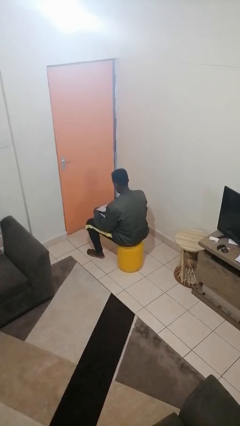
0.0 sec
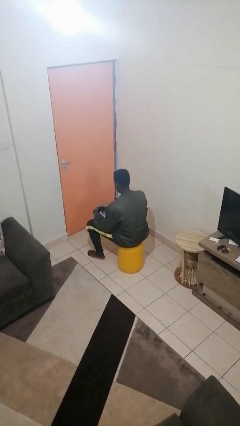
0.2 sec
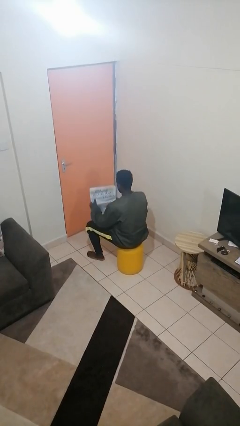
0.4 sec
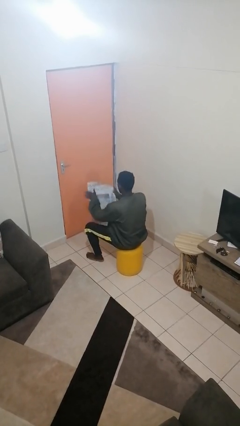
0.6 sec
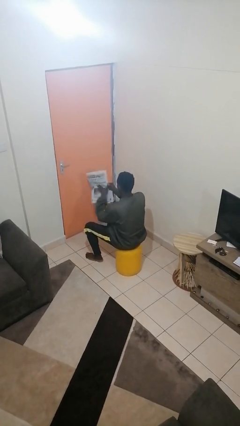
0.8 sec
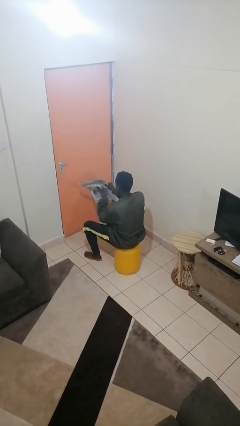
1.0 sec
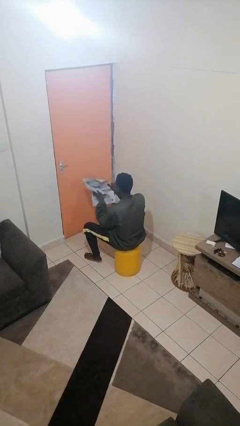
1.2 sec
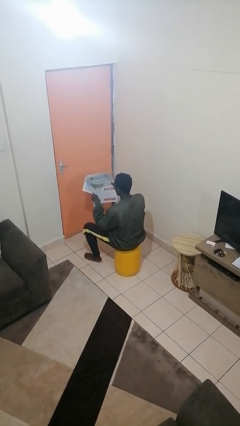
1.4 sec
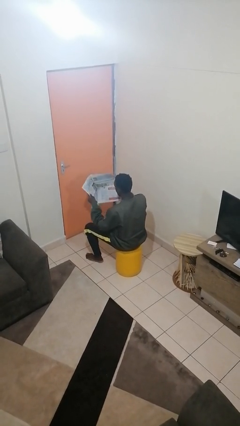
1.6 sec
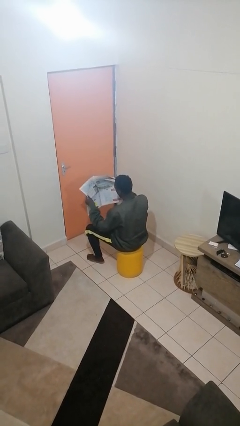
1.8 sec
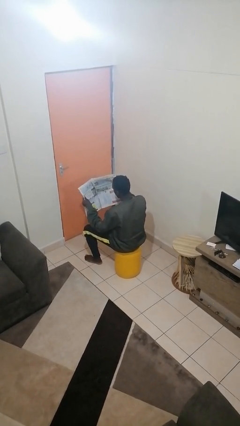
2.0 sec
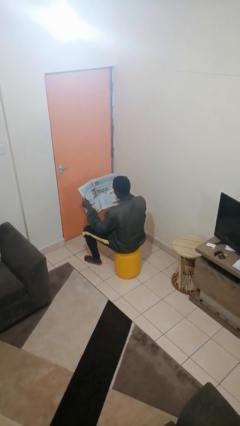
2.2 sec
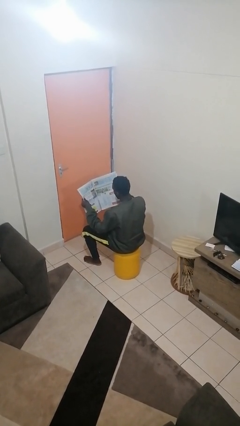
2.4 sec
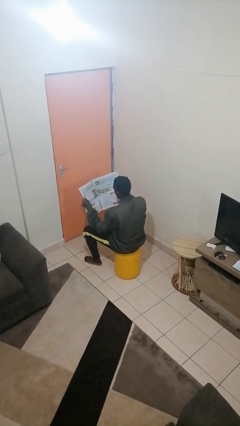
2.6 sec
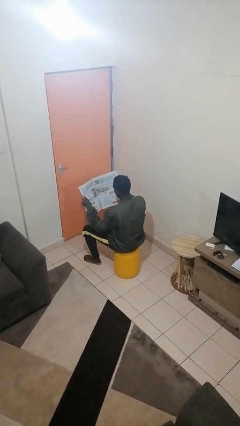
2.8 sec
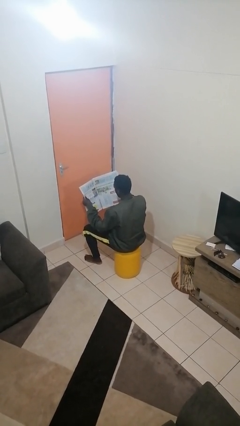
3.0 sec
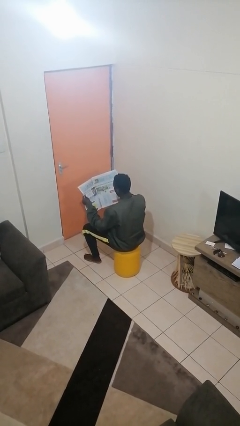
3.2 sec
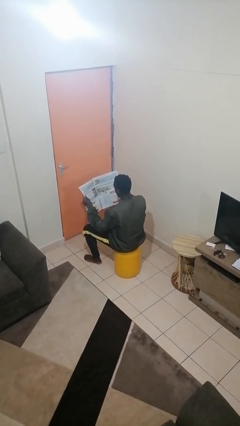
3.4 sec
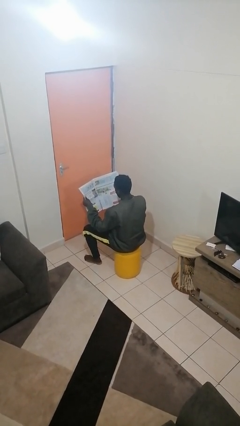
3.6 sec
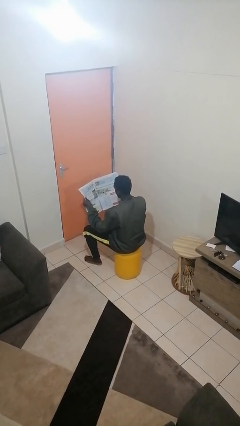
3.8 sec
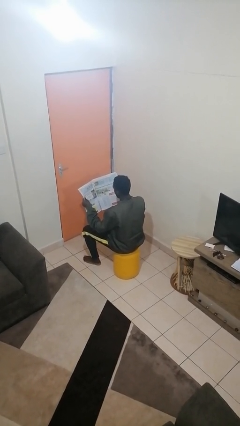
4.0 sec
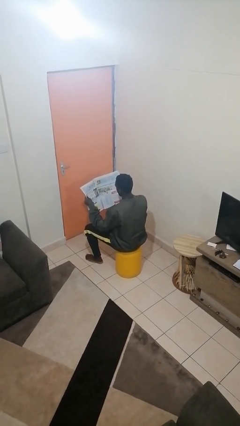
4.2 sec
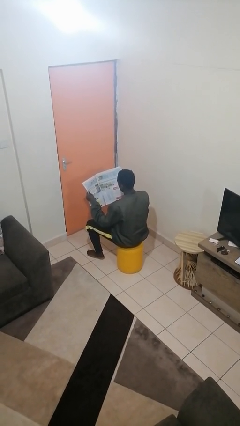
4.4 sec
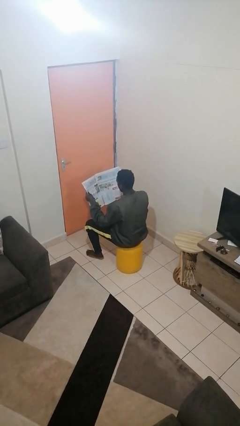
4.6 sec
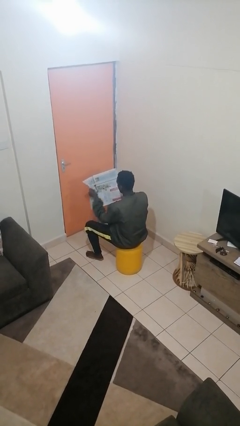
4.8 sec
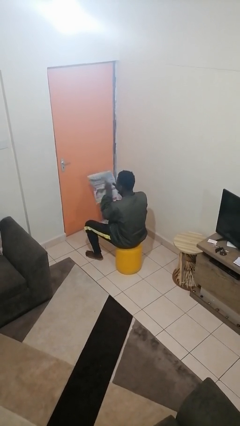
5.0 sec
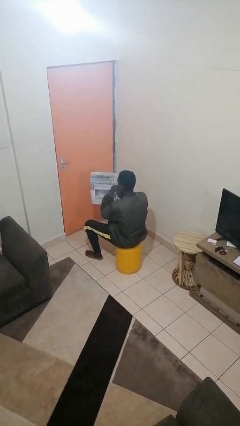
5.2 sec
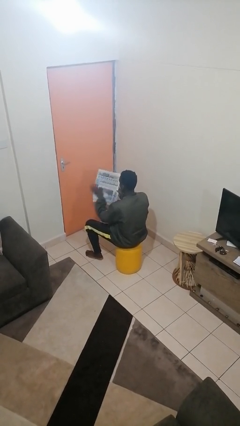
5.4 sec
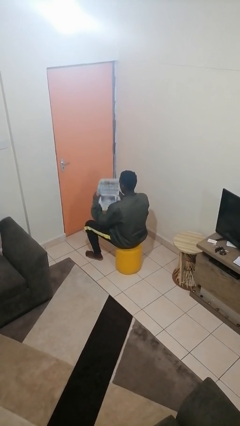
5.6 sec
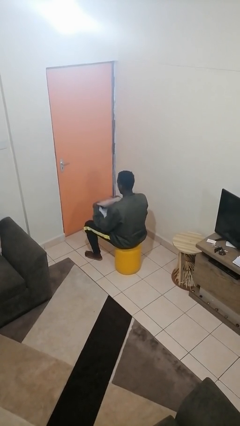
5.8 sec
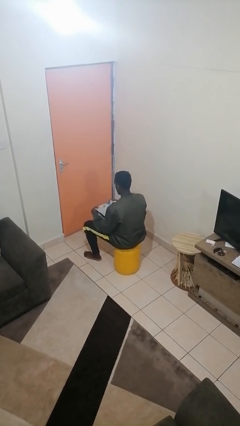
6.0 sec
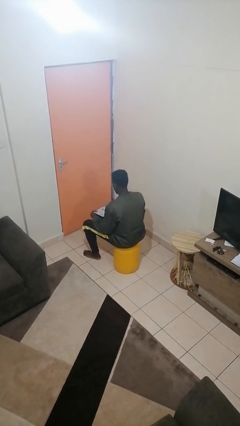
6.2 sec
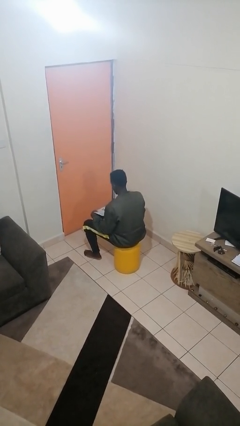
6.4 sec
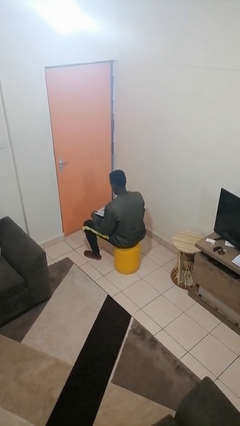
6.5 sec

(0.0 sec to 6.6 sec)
person reads newspaper

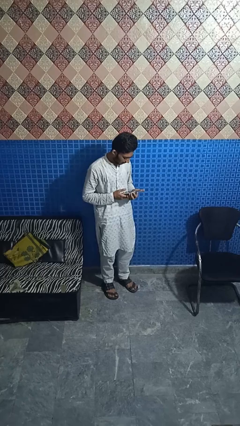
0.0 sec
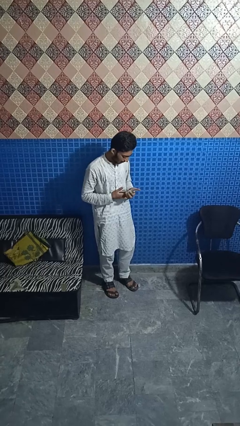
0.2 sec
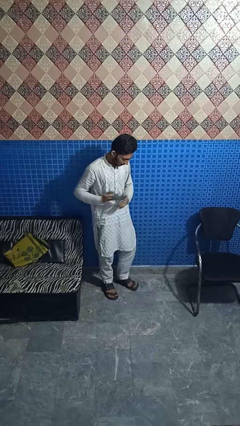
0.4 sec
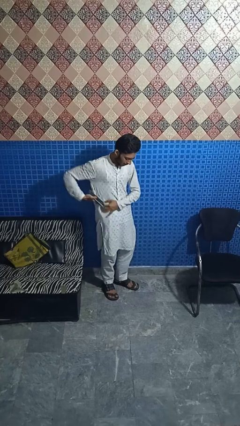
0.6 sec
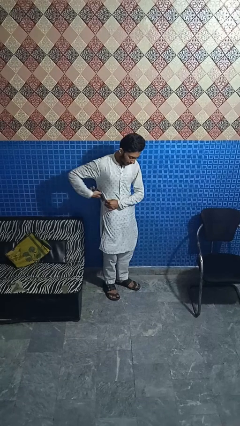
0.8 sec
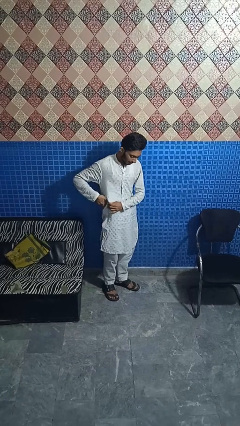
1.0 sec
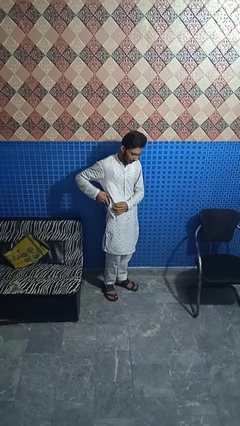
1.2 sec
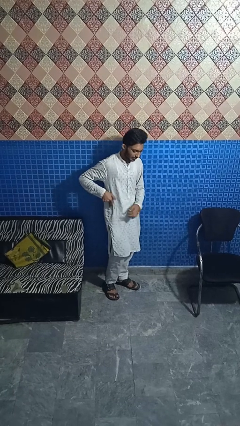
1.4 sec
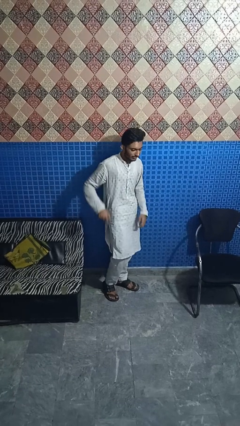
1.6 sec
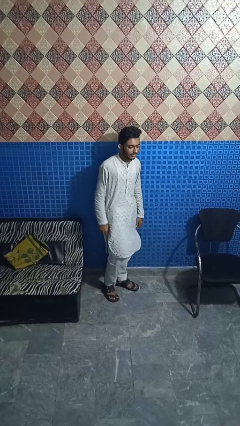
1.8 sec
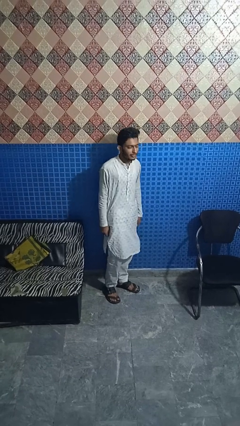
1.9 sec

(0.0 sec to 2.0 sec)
person puts phone into pocket

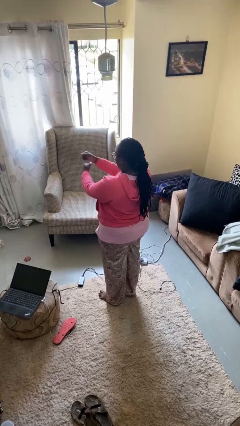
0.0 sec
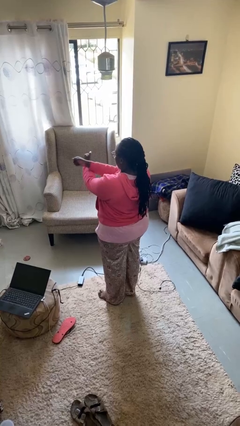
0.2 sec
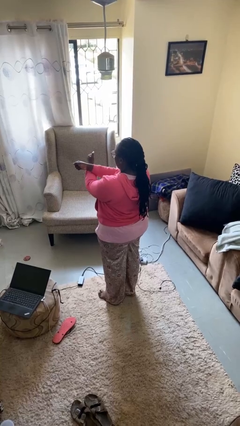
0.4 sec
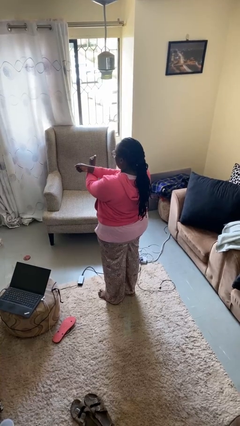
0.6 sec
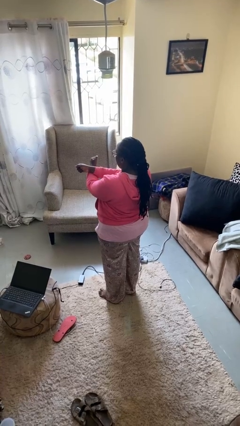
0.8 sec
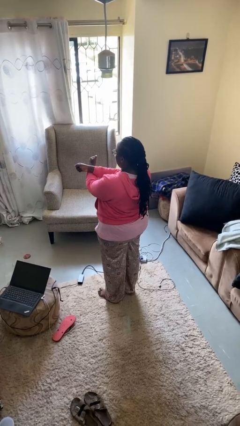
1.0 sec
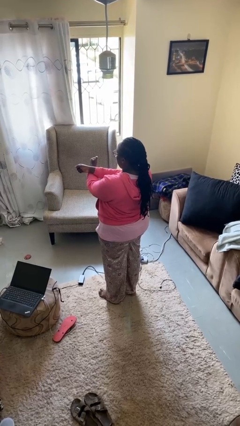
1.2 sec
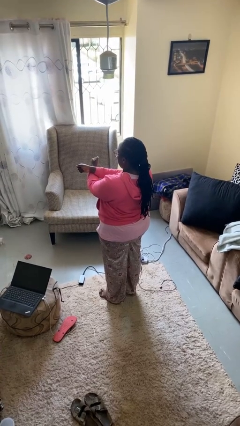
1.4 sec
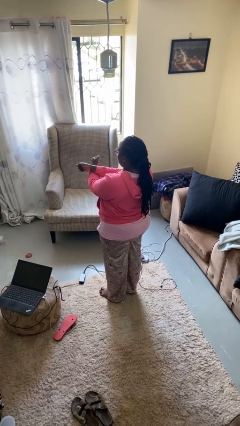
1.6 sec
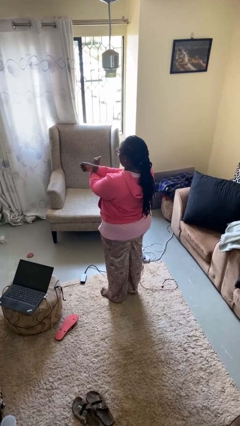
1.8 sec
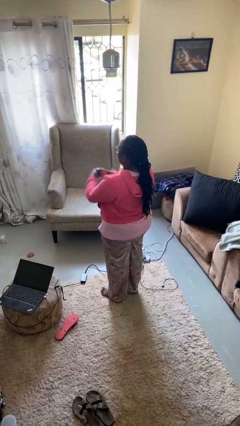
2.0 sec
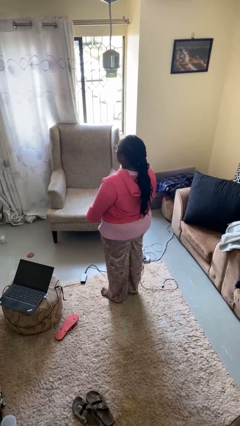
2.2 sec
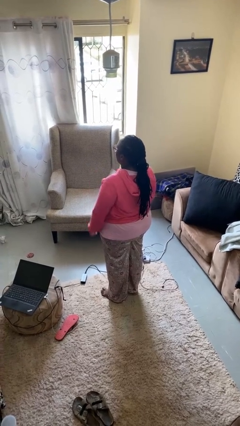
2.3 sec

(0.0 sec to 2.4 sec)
person gestures arms x

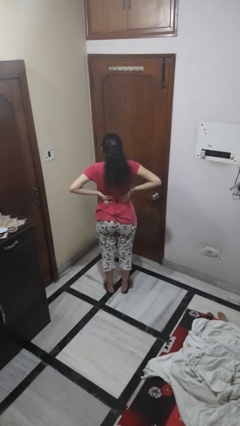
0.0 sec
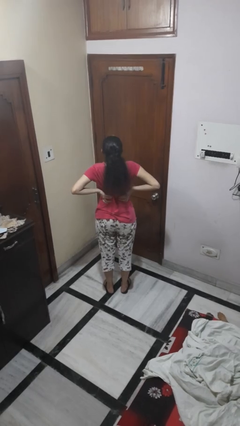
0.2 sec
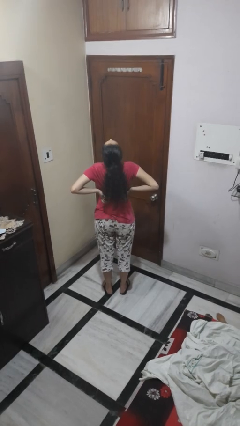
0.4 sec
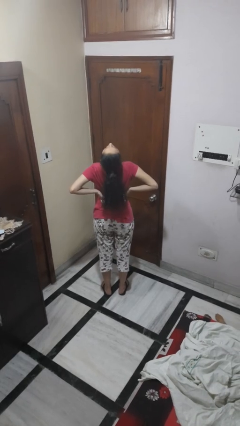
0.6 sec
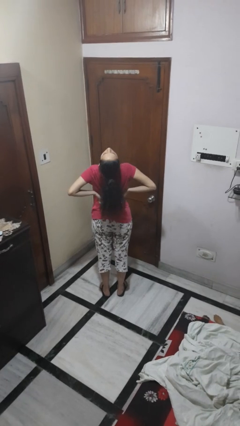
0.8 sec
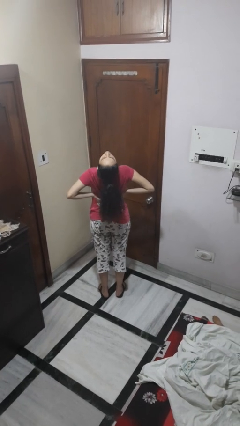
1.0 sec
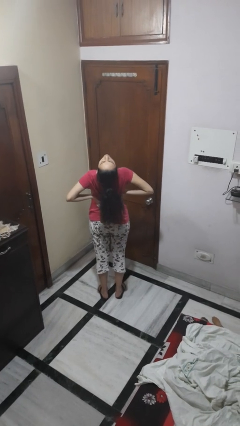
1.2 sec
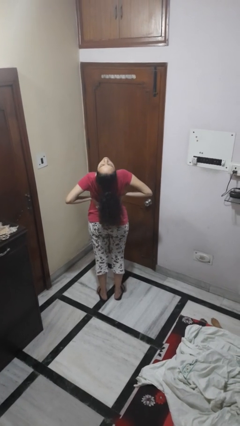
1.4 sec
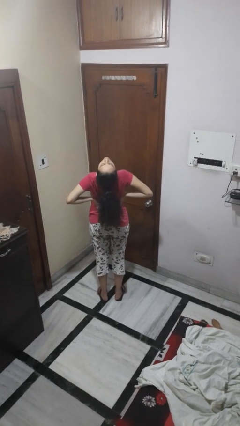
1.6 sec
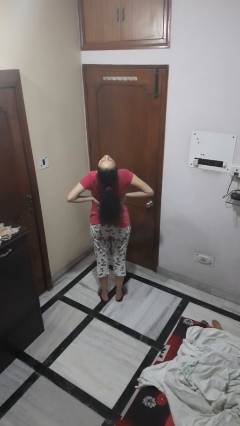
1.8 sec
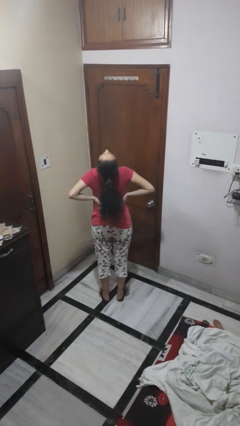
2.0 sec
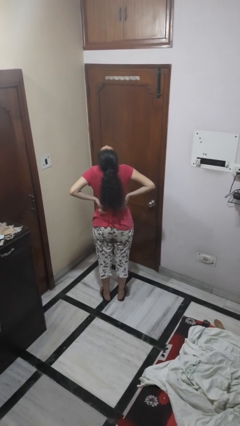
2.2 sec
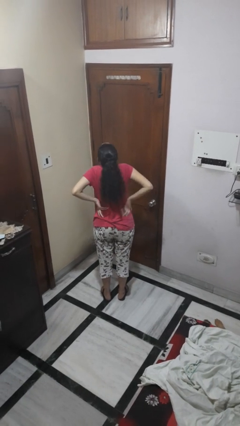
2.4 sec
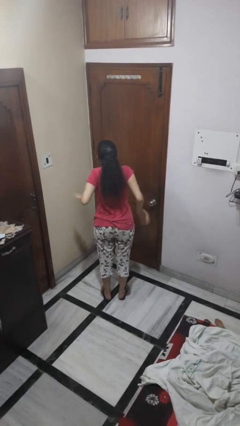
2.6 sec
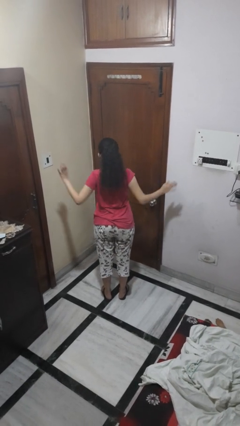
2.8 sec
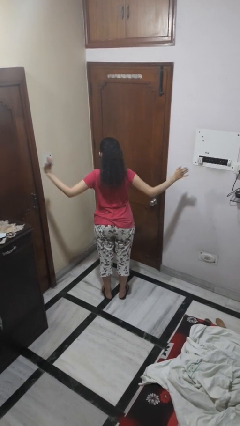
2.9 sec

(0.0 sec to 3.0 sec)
person stretches back

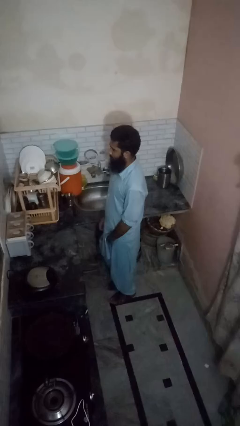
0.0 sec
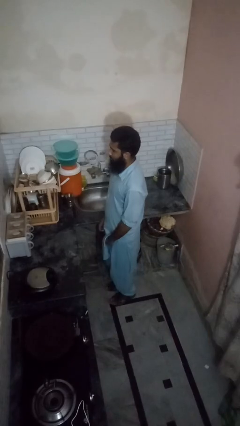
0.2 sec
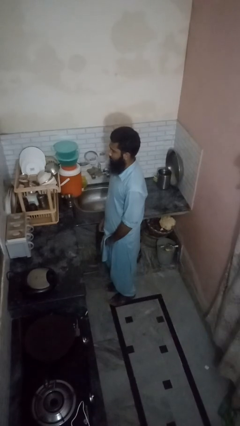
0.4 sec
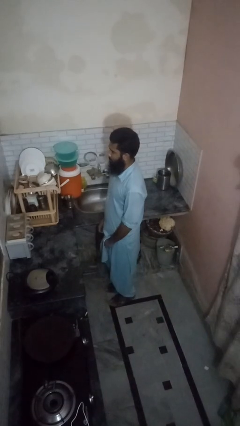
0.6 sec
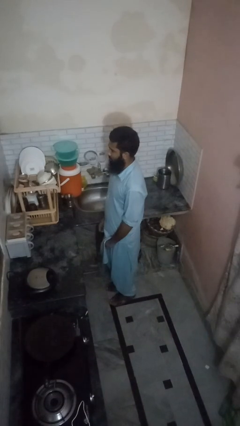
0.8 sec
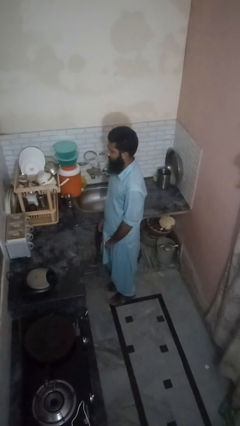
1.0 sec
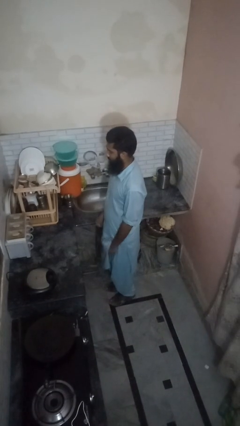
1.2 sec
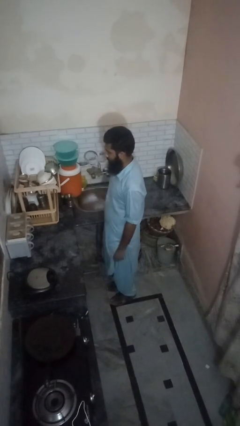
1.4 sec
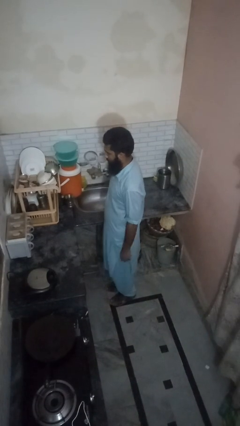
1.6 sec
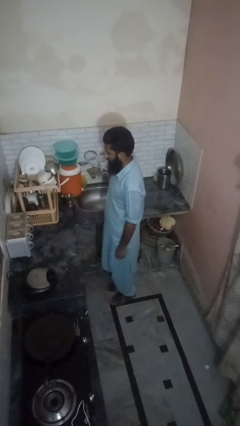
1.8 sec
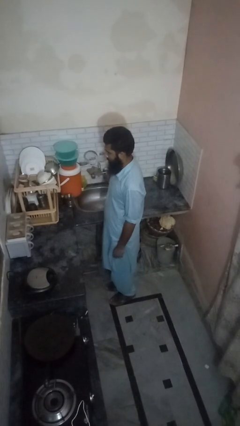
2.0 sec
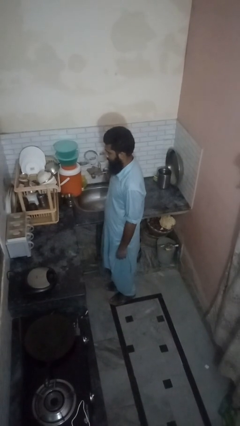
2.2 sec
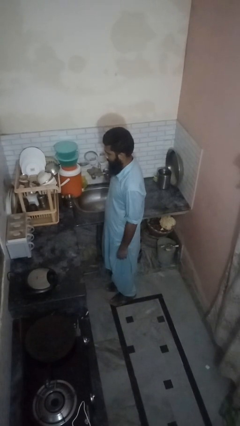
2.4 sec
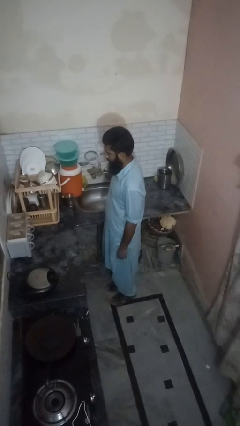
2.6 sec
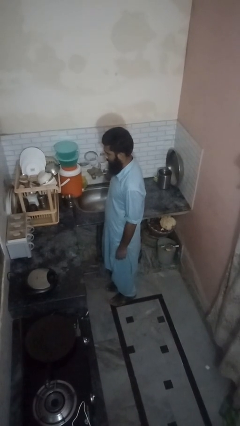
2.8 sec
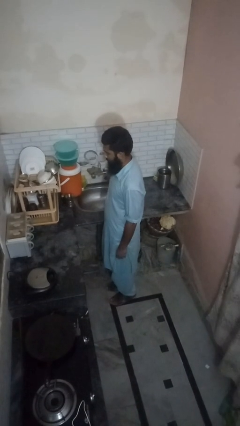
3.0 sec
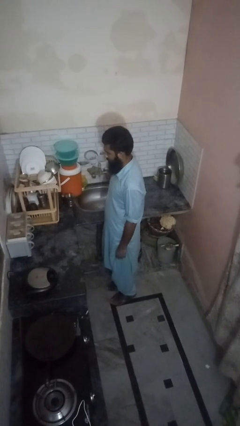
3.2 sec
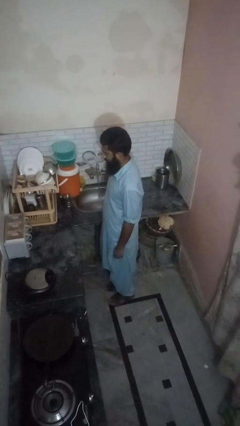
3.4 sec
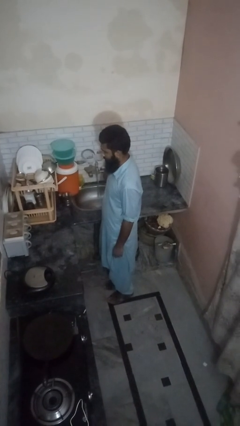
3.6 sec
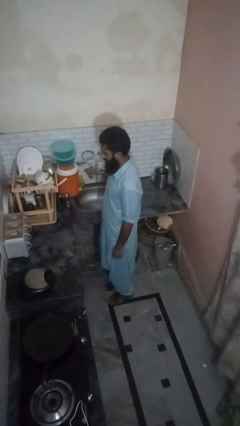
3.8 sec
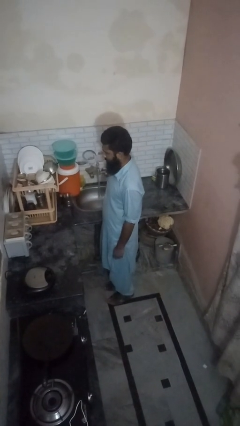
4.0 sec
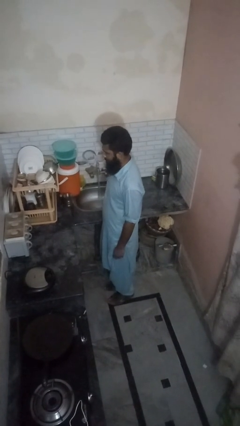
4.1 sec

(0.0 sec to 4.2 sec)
person turns on faucet
